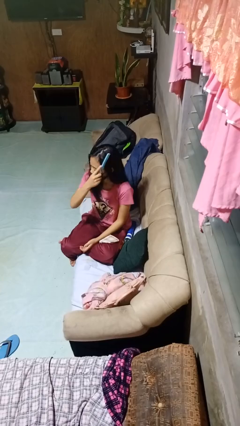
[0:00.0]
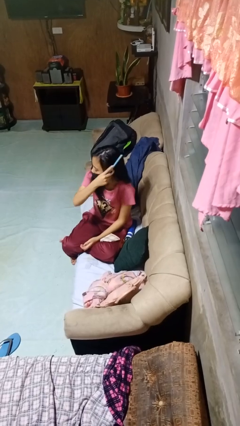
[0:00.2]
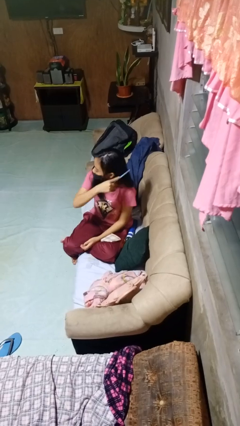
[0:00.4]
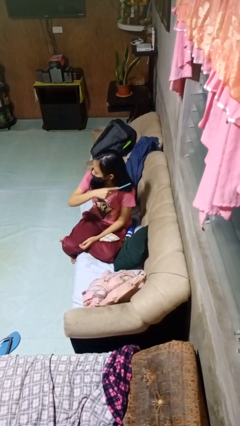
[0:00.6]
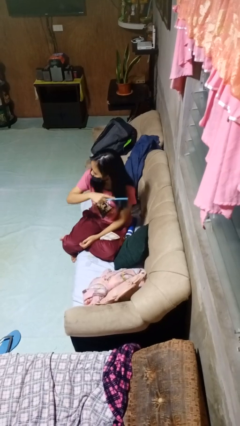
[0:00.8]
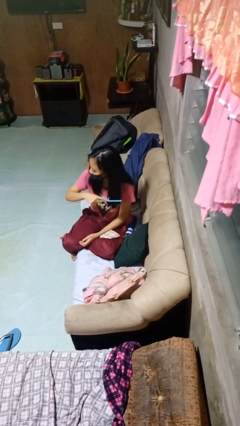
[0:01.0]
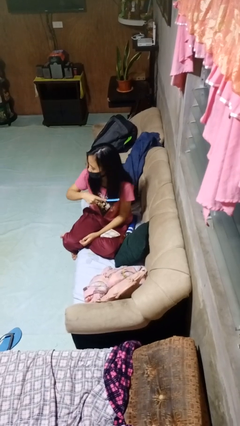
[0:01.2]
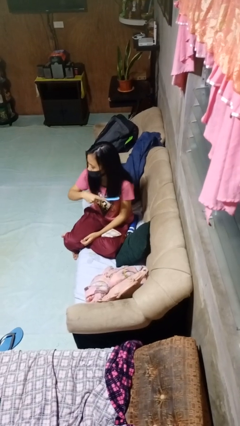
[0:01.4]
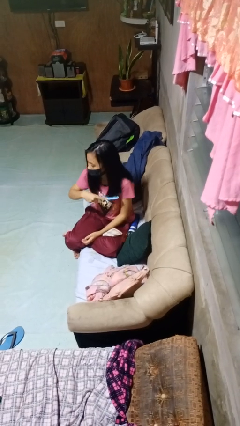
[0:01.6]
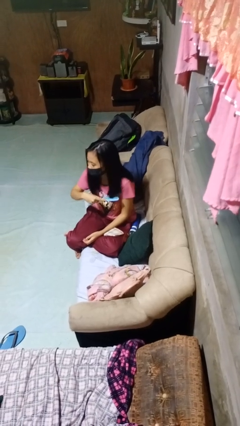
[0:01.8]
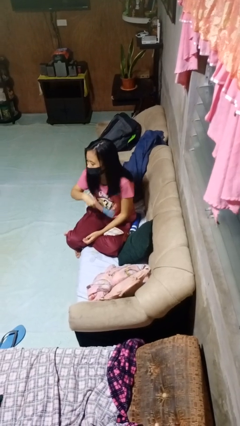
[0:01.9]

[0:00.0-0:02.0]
person brushes hair

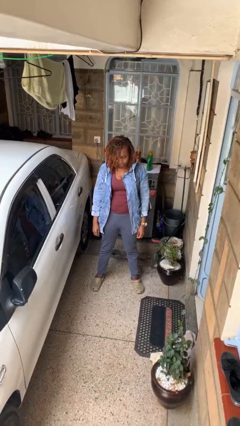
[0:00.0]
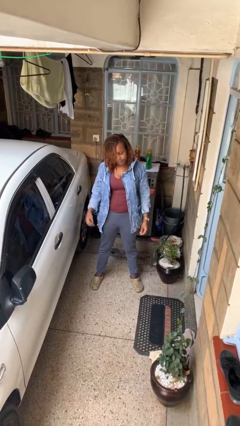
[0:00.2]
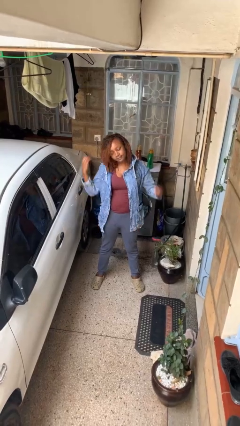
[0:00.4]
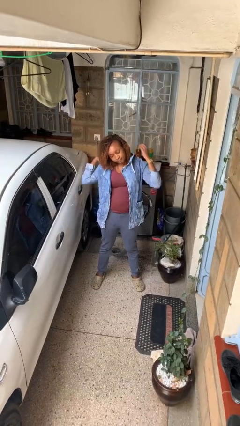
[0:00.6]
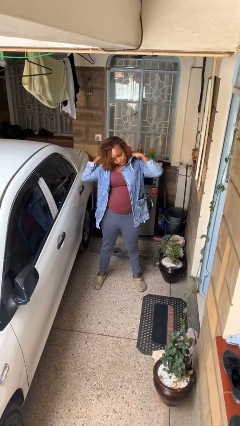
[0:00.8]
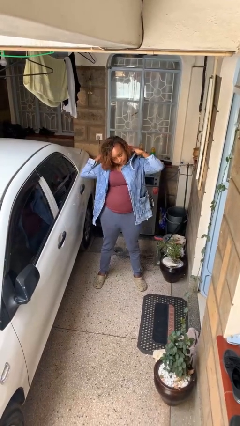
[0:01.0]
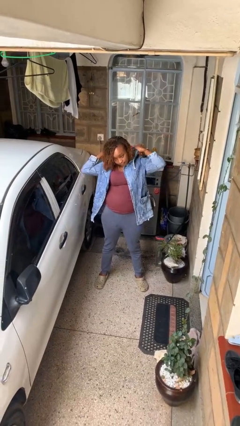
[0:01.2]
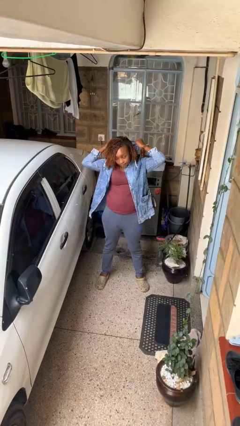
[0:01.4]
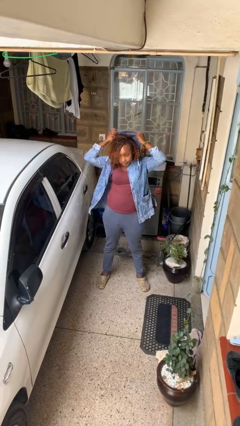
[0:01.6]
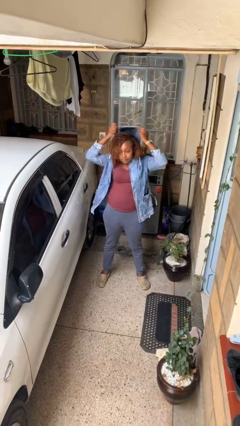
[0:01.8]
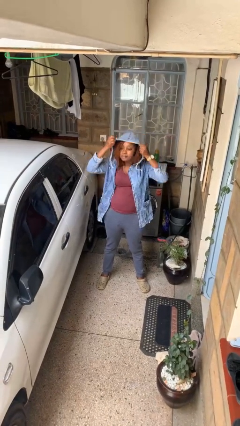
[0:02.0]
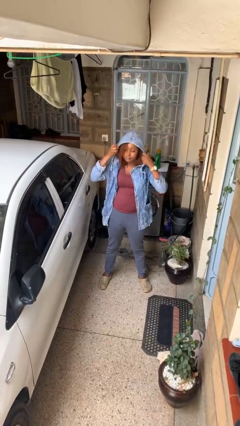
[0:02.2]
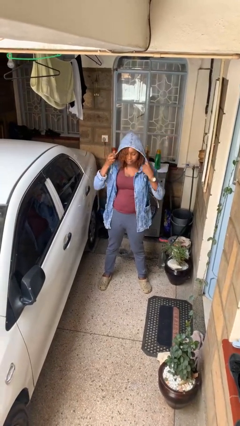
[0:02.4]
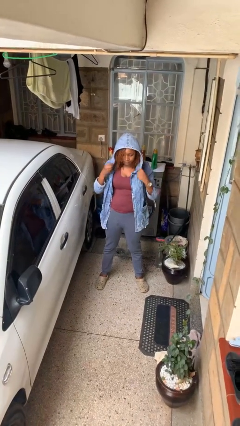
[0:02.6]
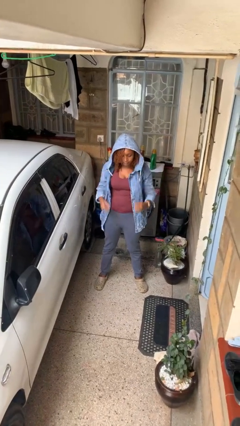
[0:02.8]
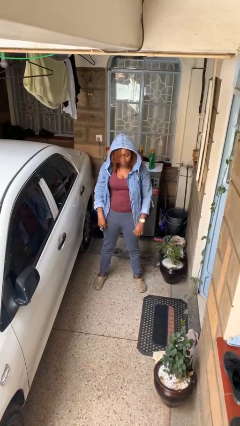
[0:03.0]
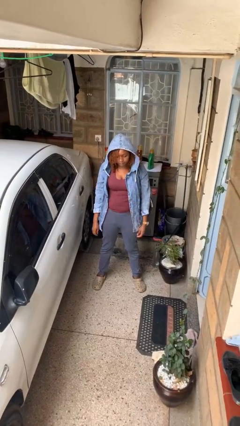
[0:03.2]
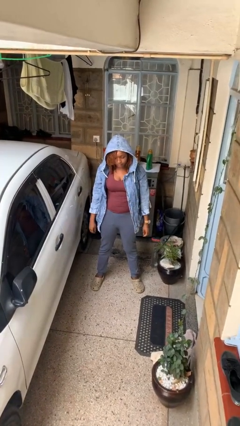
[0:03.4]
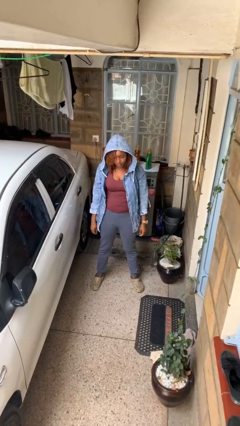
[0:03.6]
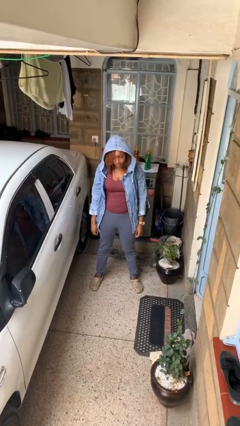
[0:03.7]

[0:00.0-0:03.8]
person puts on hoodie

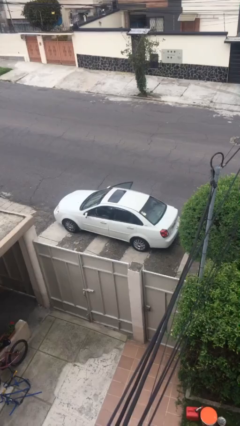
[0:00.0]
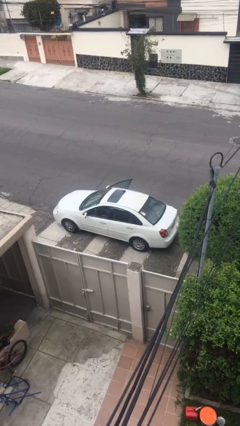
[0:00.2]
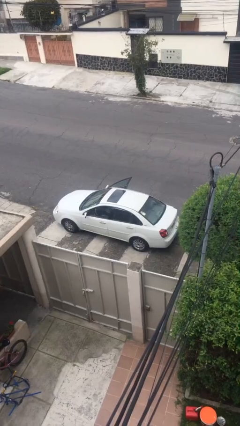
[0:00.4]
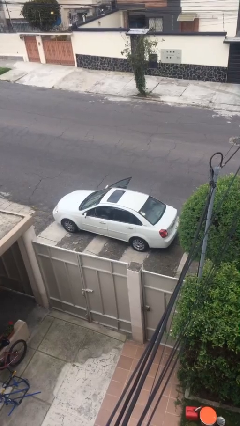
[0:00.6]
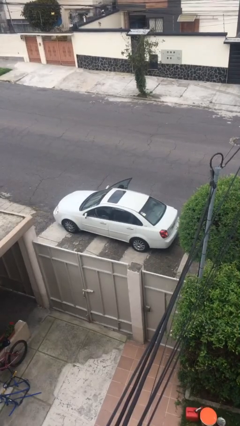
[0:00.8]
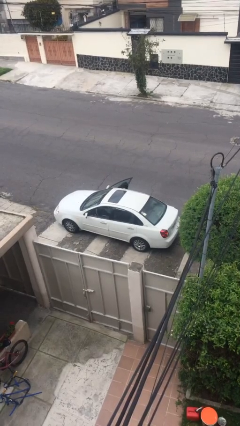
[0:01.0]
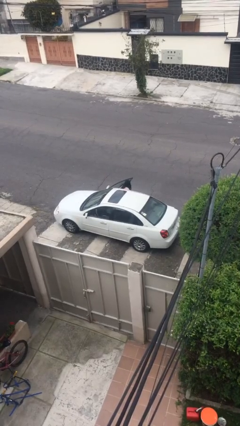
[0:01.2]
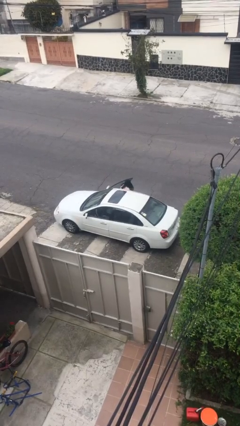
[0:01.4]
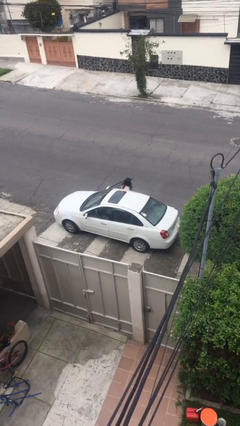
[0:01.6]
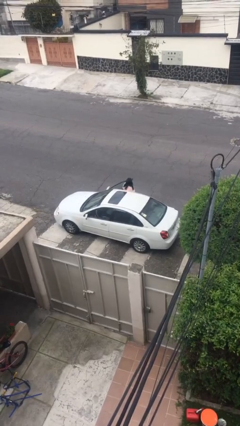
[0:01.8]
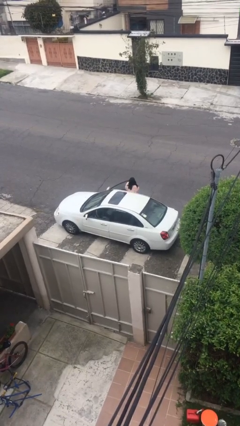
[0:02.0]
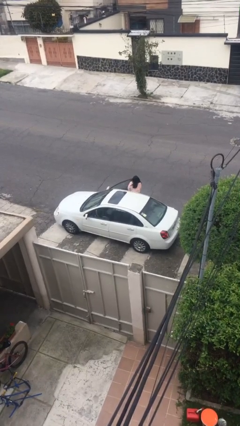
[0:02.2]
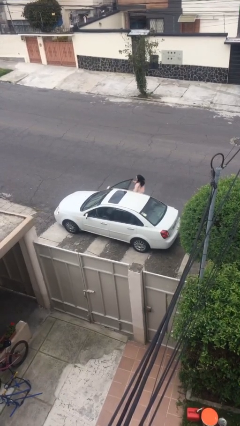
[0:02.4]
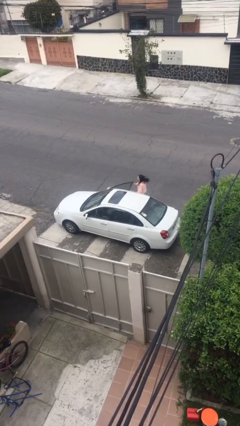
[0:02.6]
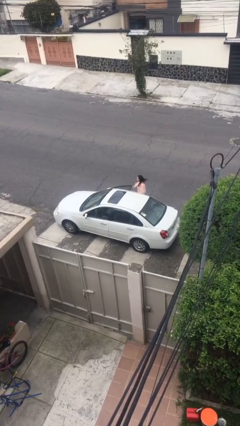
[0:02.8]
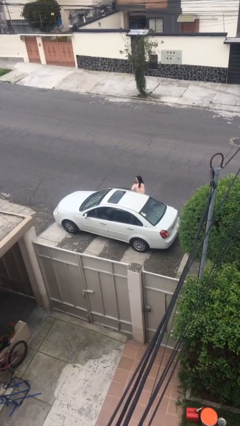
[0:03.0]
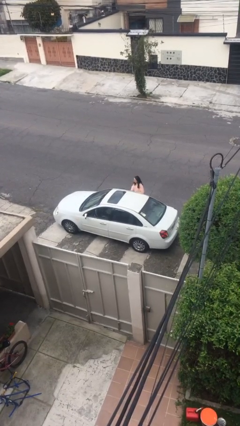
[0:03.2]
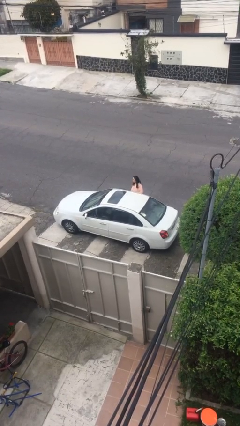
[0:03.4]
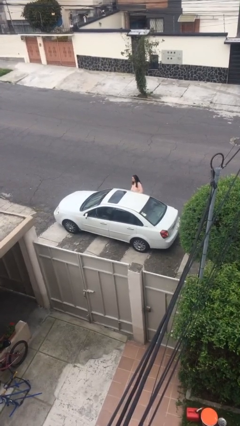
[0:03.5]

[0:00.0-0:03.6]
car drops off person

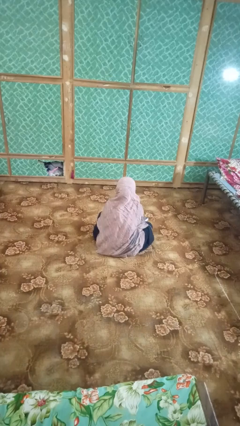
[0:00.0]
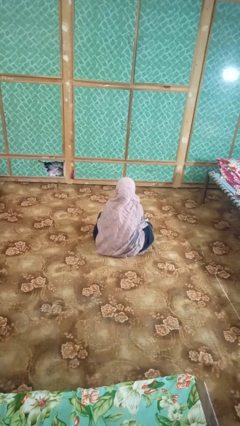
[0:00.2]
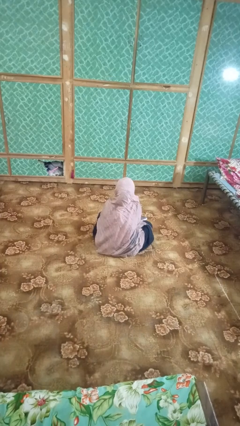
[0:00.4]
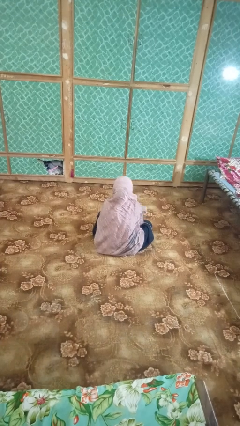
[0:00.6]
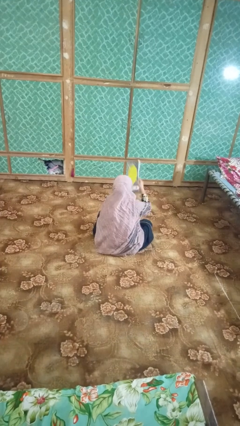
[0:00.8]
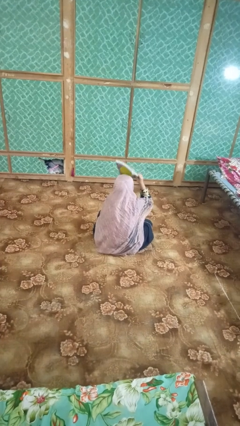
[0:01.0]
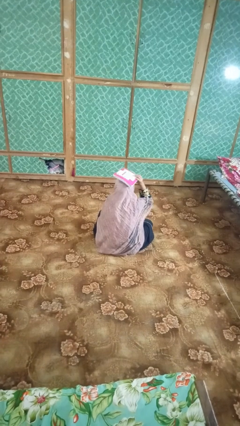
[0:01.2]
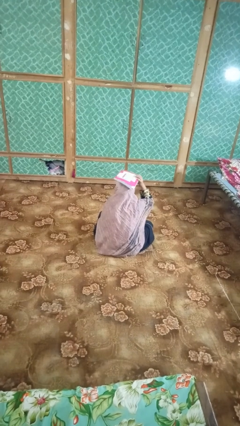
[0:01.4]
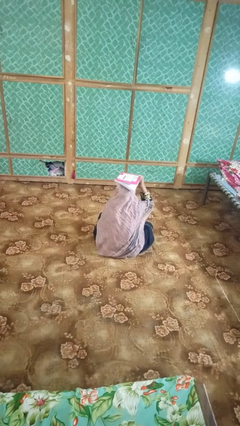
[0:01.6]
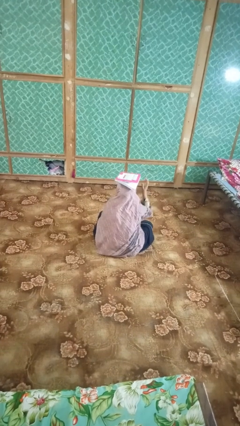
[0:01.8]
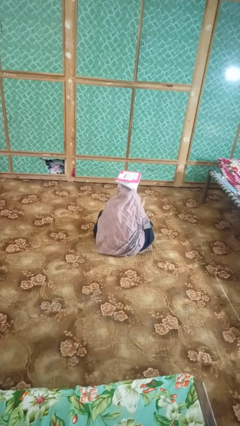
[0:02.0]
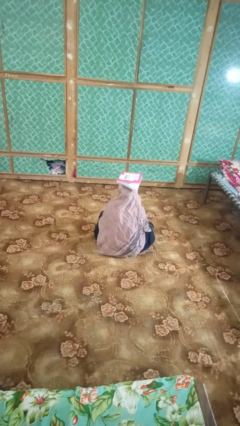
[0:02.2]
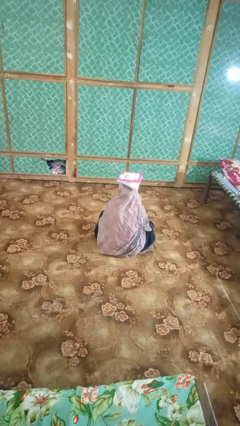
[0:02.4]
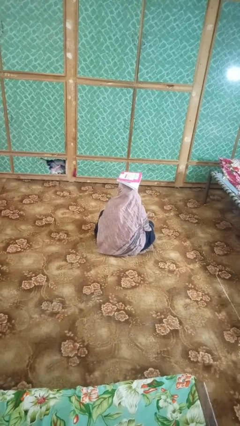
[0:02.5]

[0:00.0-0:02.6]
person holds object above head

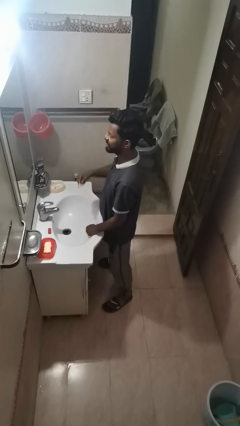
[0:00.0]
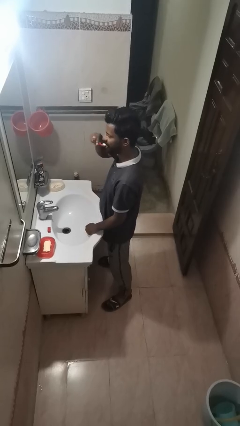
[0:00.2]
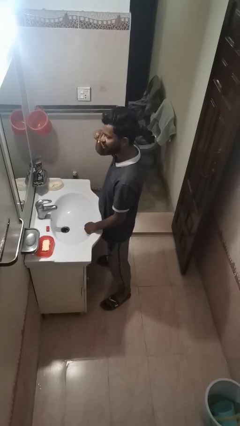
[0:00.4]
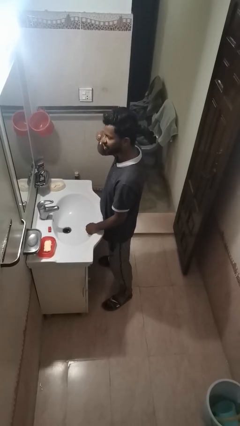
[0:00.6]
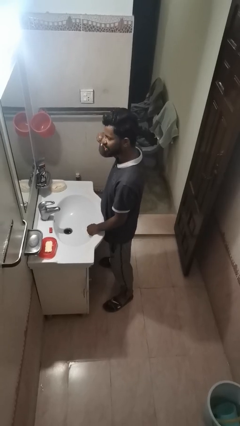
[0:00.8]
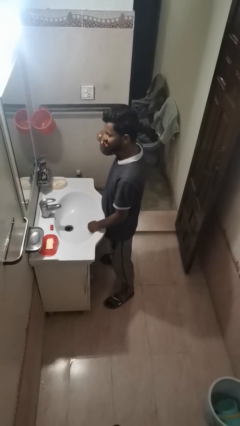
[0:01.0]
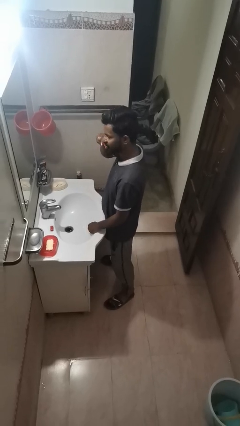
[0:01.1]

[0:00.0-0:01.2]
person brushes teeth

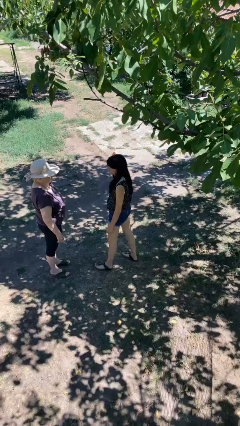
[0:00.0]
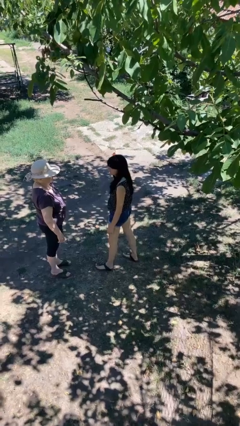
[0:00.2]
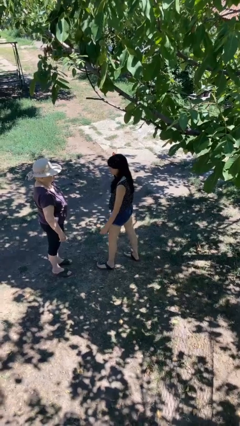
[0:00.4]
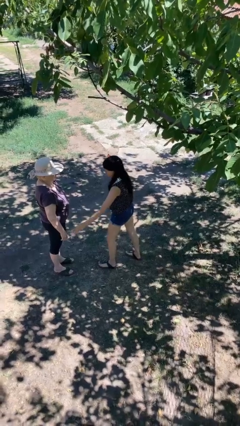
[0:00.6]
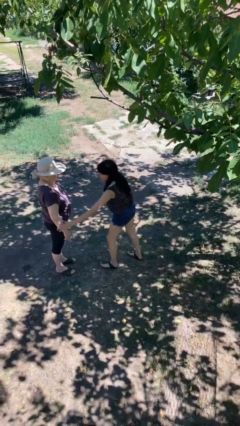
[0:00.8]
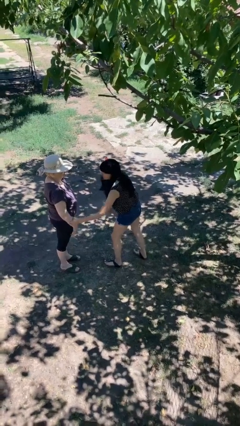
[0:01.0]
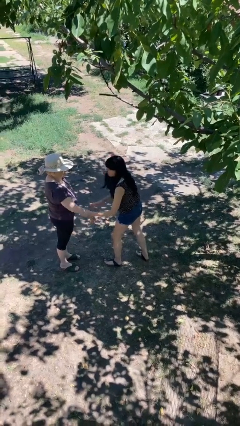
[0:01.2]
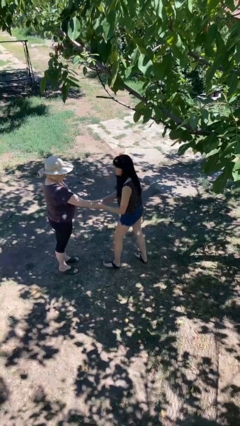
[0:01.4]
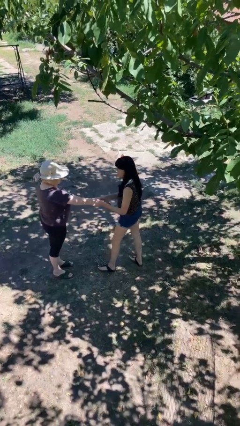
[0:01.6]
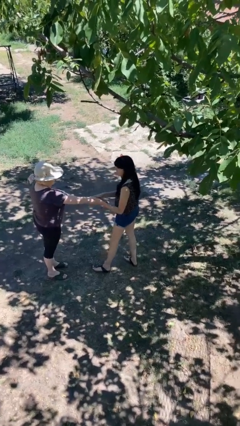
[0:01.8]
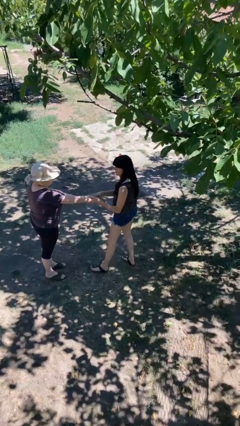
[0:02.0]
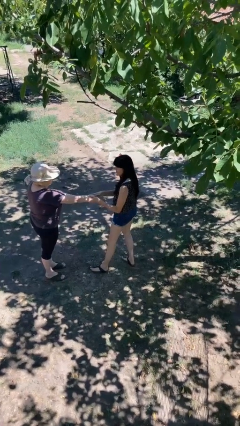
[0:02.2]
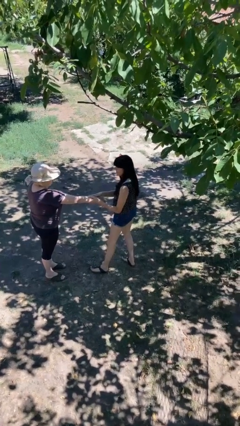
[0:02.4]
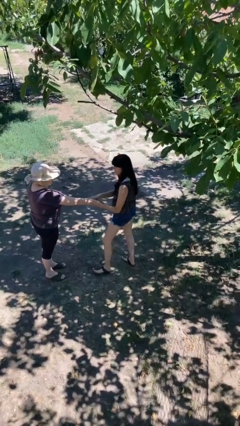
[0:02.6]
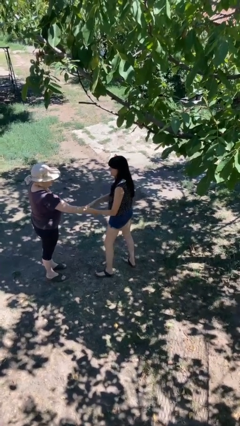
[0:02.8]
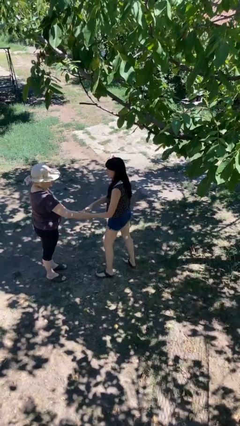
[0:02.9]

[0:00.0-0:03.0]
person grabs person by forearm

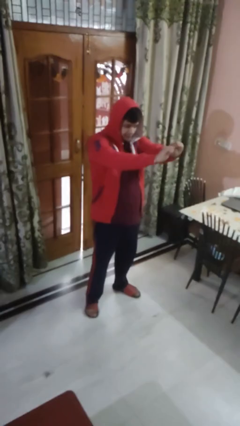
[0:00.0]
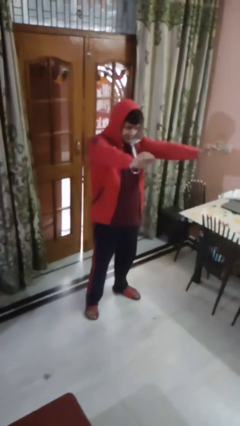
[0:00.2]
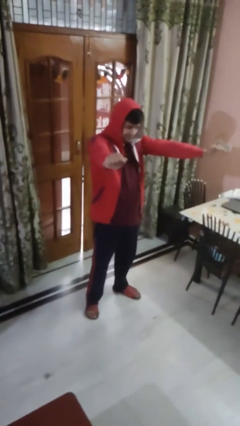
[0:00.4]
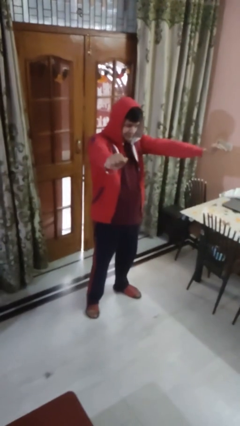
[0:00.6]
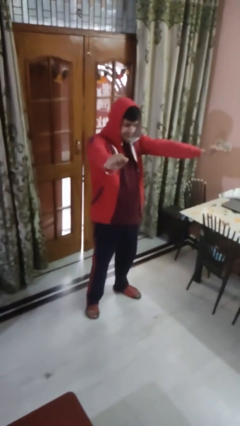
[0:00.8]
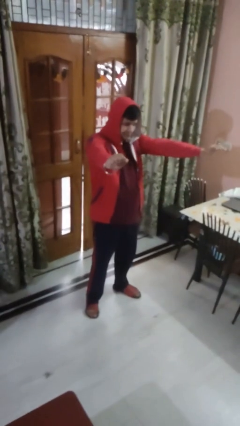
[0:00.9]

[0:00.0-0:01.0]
person gestures zoom in

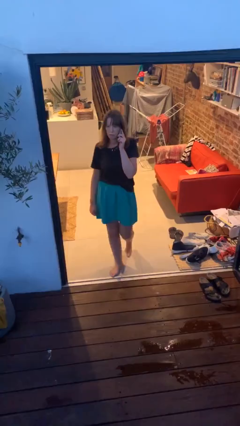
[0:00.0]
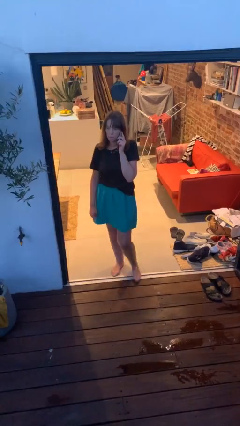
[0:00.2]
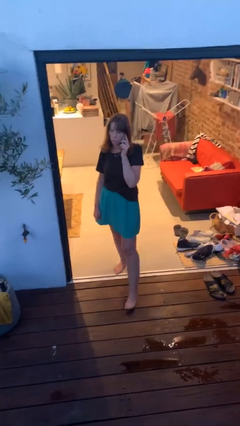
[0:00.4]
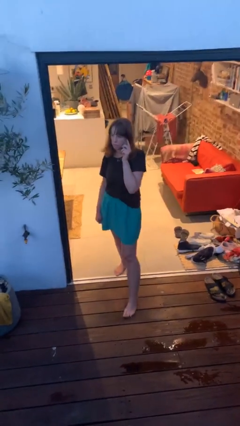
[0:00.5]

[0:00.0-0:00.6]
person enters scene through structure
